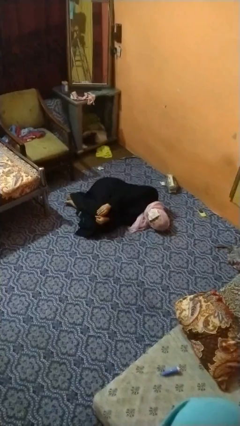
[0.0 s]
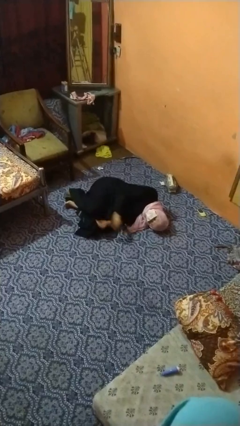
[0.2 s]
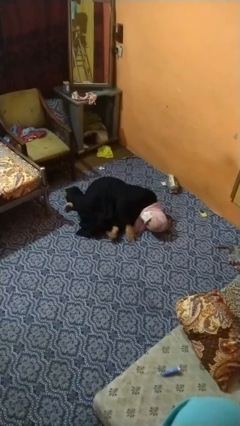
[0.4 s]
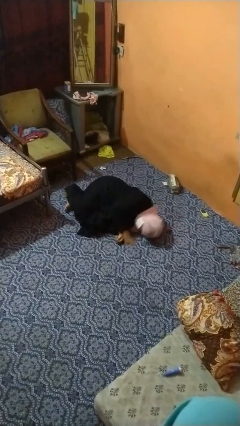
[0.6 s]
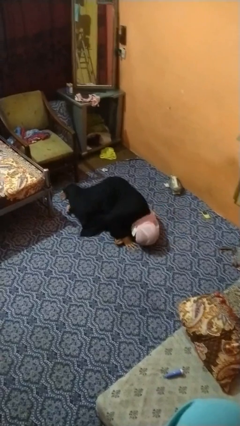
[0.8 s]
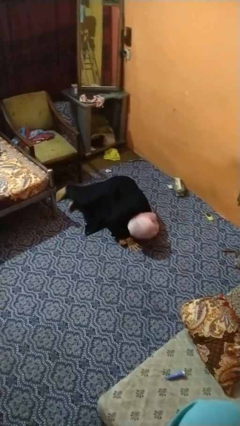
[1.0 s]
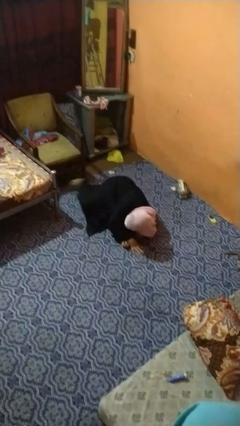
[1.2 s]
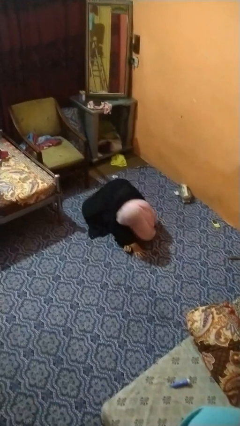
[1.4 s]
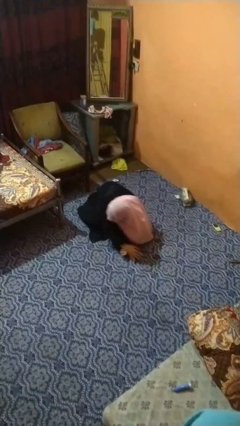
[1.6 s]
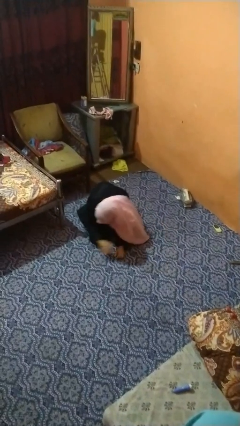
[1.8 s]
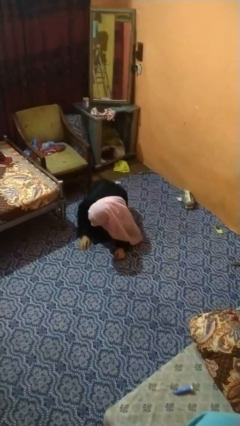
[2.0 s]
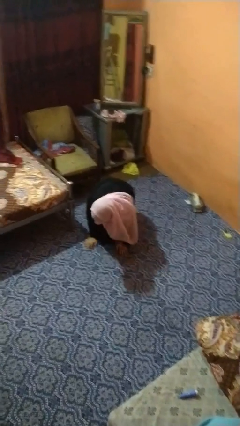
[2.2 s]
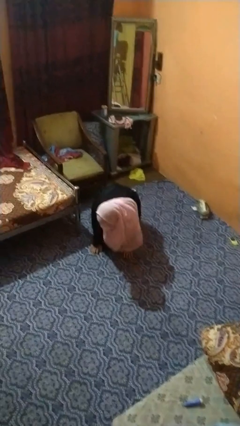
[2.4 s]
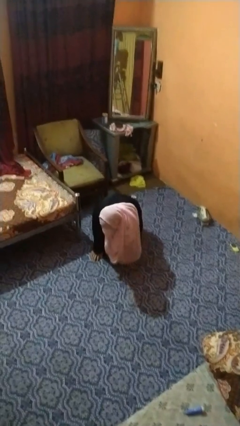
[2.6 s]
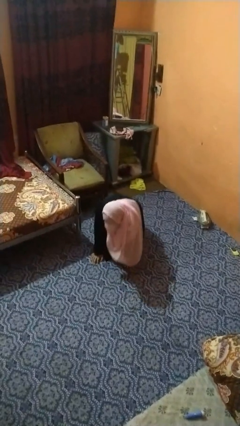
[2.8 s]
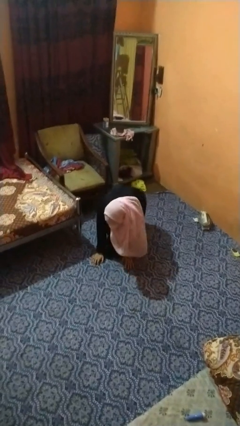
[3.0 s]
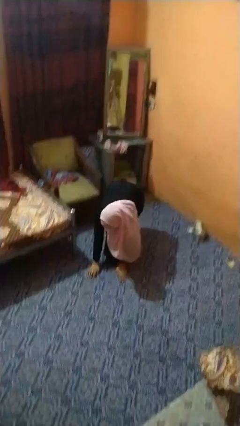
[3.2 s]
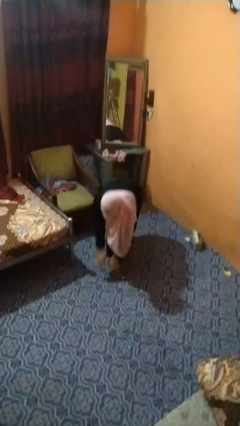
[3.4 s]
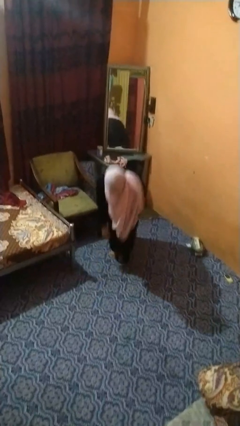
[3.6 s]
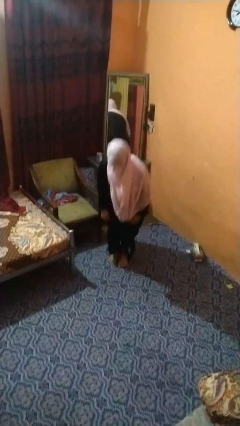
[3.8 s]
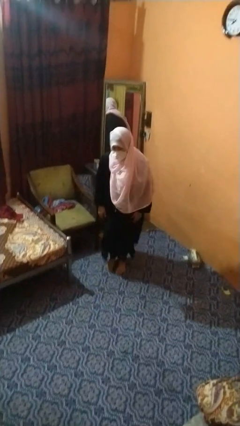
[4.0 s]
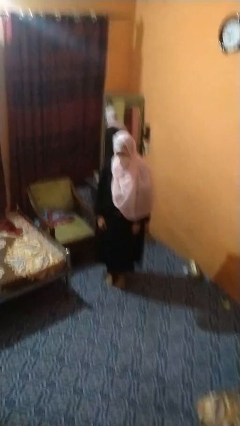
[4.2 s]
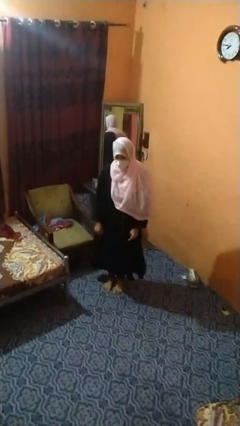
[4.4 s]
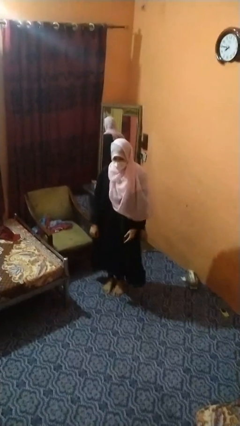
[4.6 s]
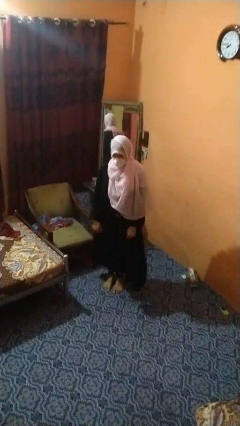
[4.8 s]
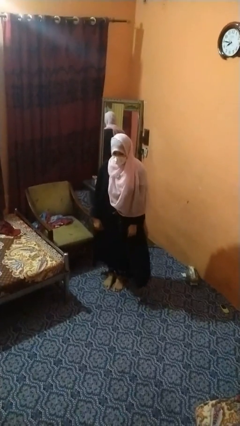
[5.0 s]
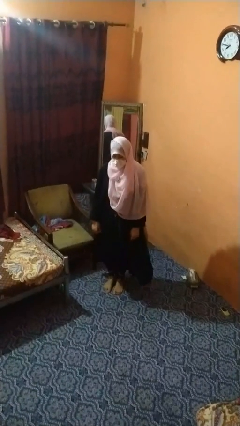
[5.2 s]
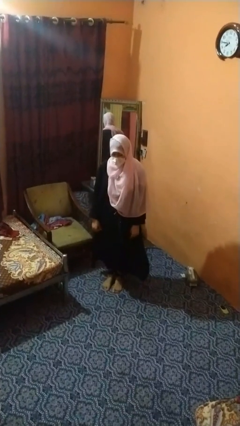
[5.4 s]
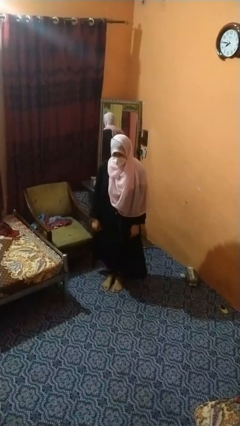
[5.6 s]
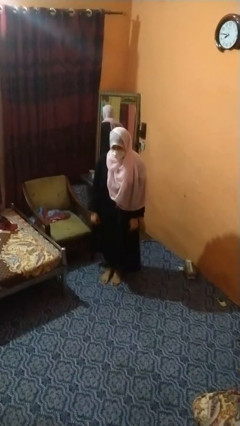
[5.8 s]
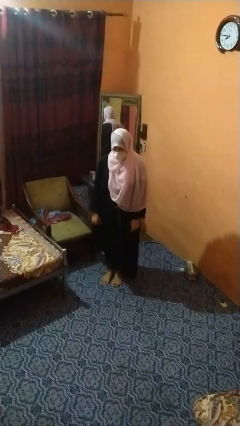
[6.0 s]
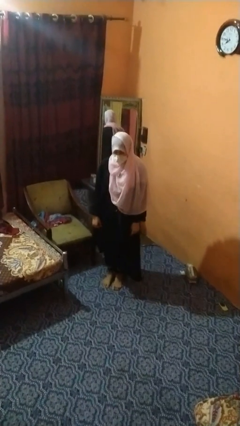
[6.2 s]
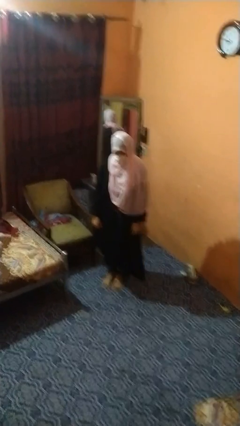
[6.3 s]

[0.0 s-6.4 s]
person stands up from floor

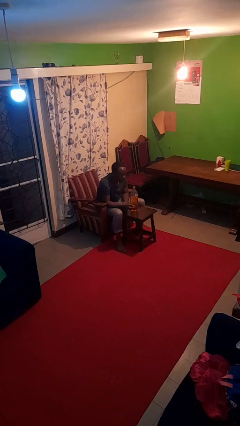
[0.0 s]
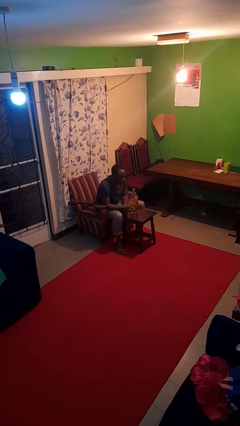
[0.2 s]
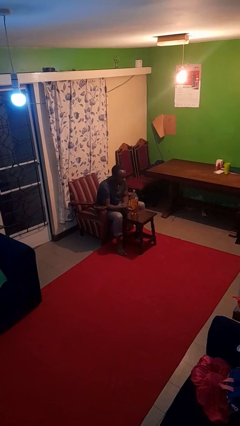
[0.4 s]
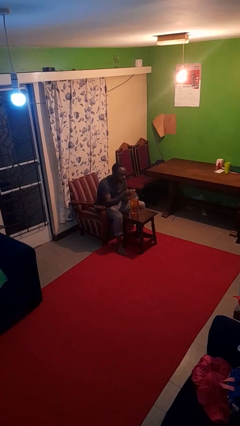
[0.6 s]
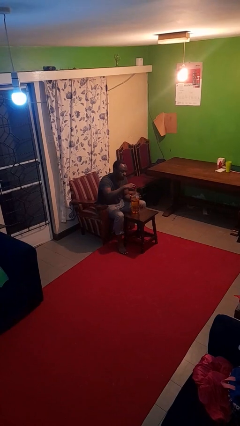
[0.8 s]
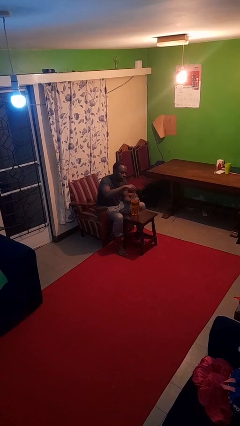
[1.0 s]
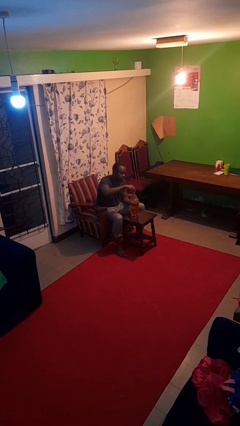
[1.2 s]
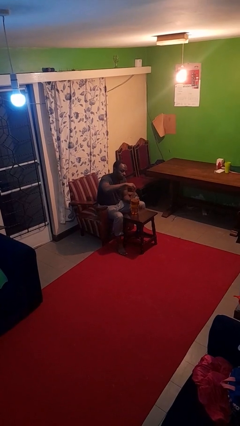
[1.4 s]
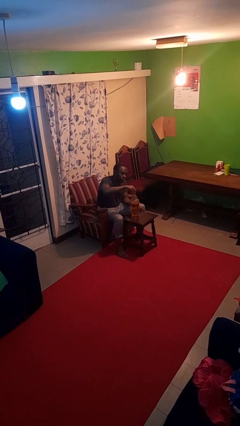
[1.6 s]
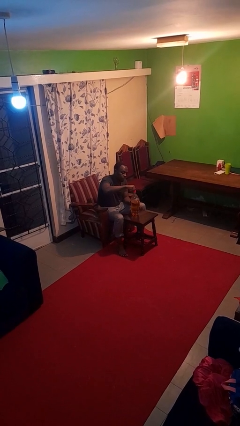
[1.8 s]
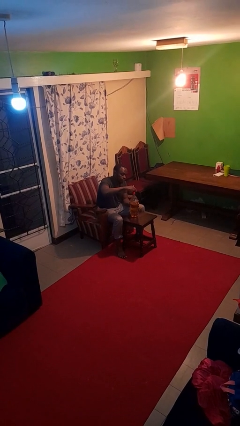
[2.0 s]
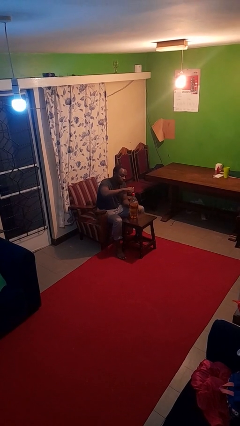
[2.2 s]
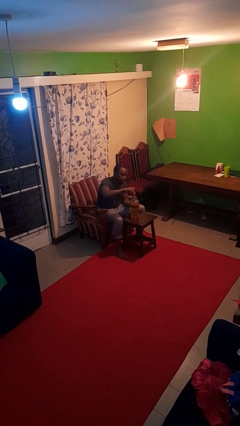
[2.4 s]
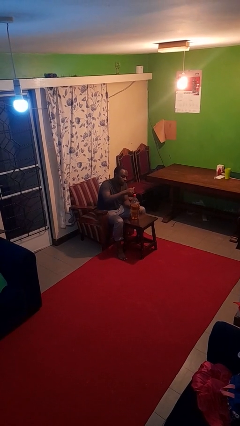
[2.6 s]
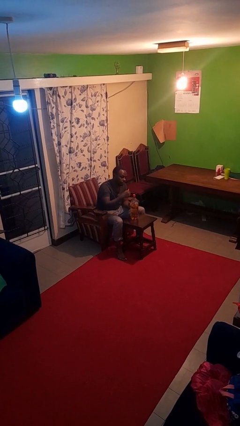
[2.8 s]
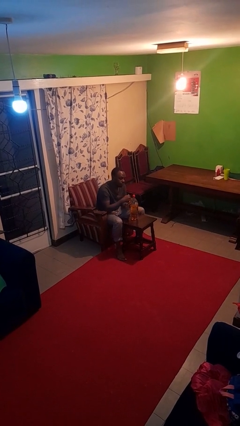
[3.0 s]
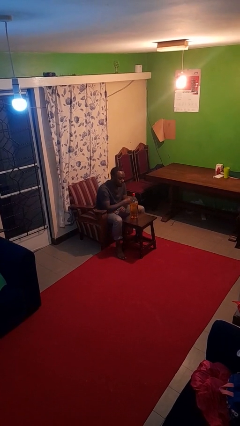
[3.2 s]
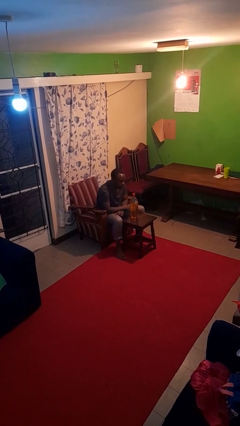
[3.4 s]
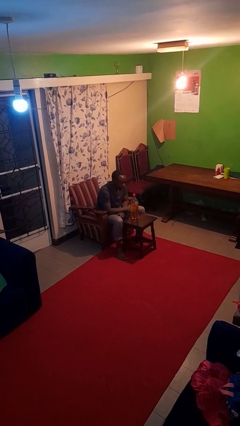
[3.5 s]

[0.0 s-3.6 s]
person screws lid to bottle

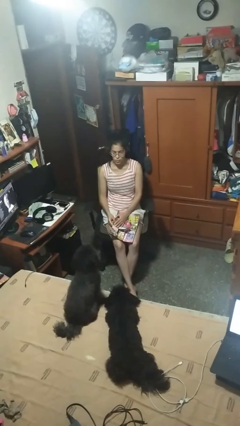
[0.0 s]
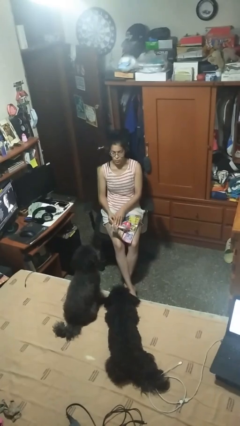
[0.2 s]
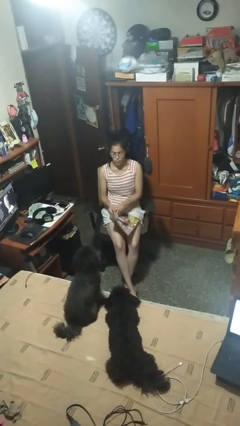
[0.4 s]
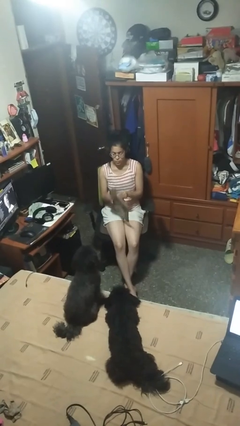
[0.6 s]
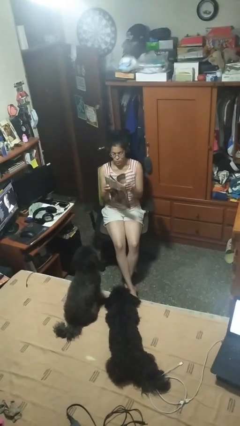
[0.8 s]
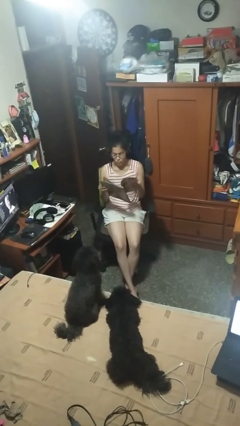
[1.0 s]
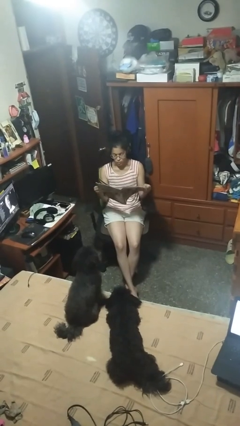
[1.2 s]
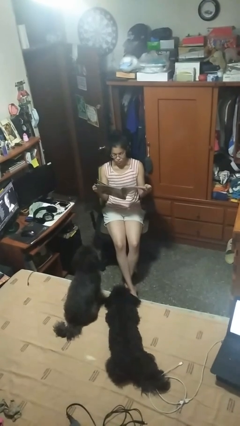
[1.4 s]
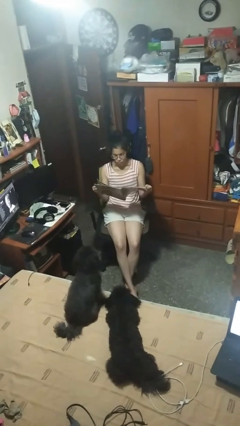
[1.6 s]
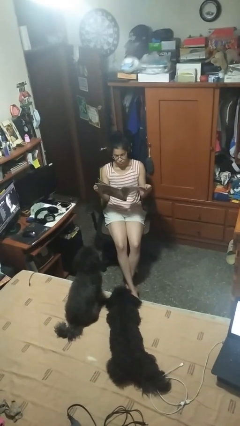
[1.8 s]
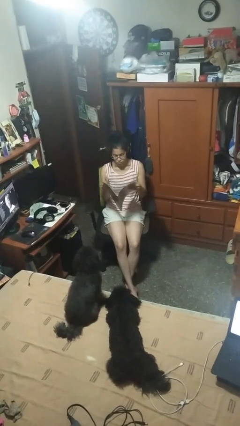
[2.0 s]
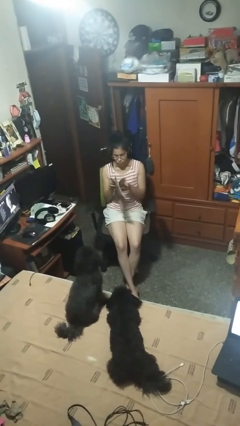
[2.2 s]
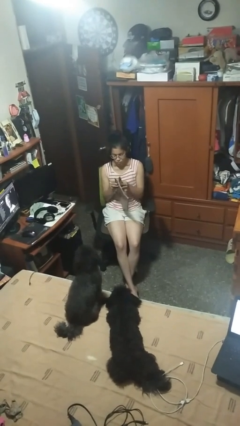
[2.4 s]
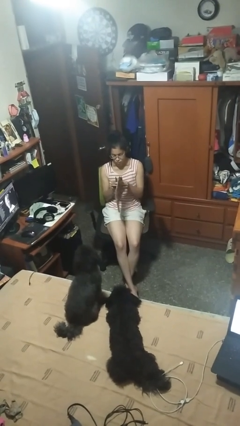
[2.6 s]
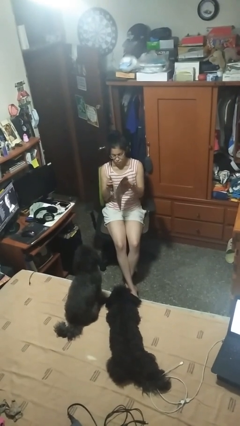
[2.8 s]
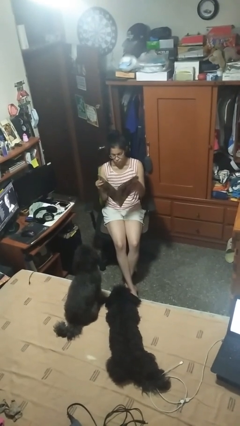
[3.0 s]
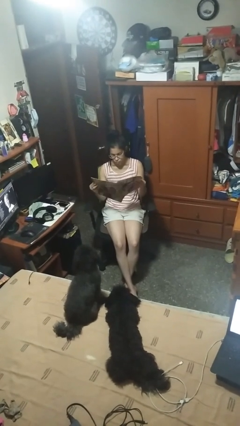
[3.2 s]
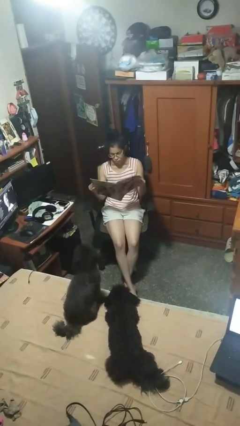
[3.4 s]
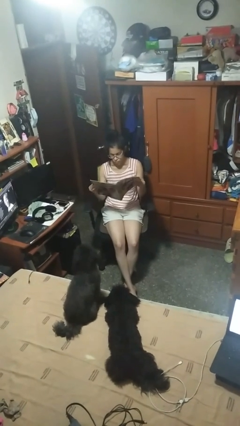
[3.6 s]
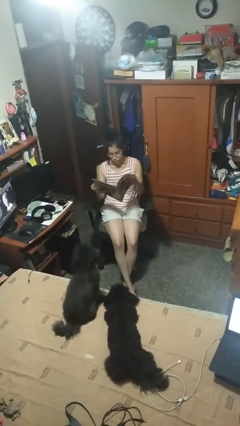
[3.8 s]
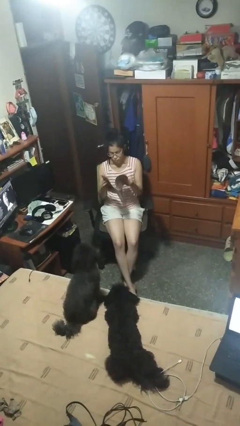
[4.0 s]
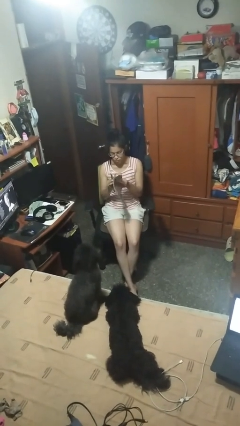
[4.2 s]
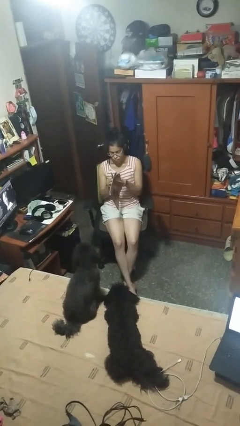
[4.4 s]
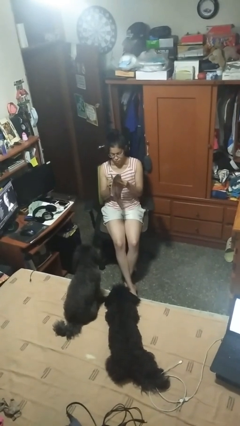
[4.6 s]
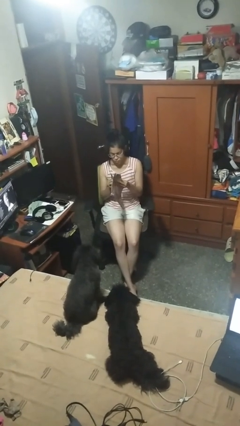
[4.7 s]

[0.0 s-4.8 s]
person reads magazine

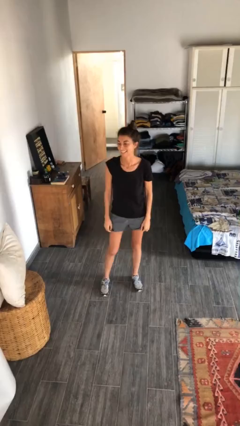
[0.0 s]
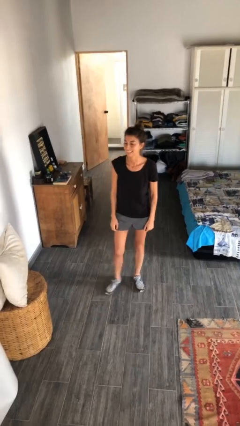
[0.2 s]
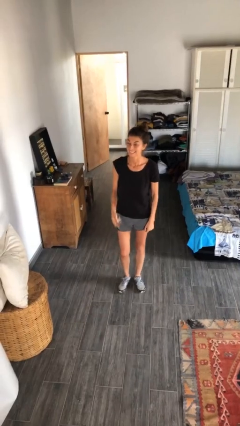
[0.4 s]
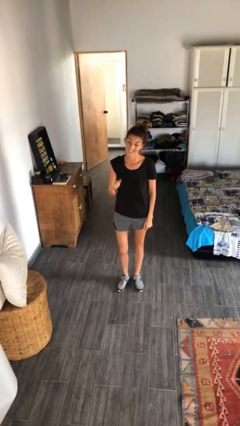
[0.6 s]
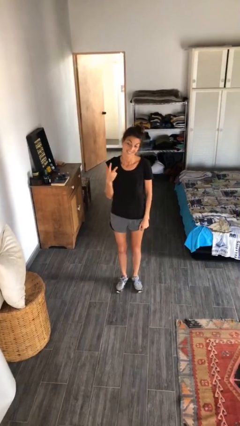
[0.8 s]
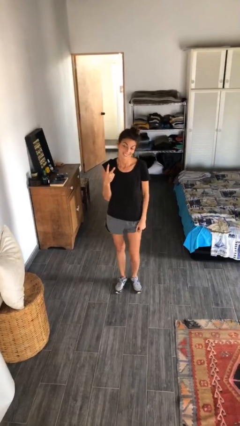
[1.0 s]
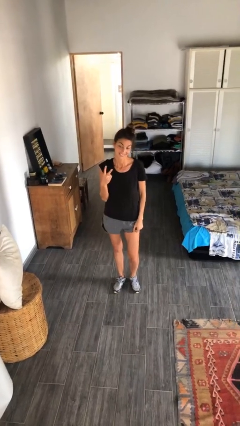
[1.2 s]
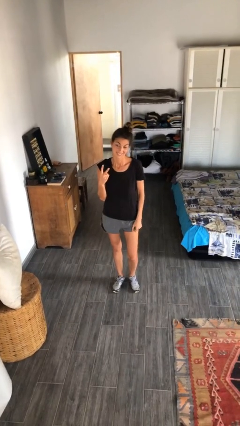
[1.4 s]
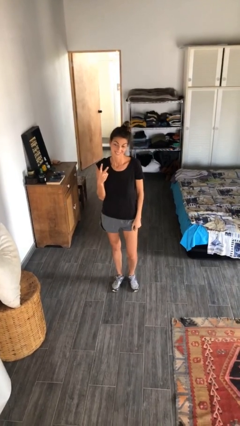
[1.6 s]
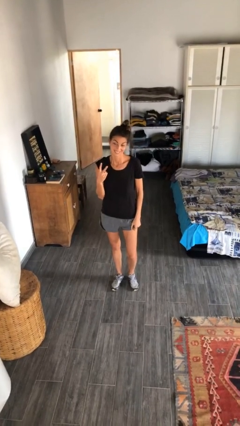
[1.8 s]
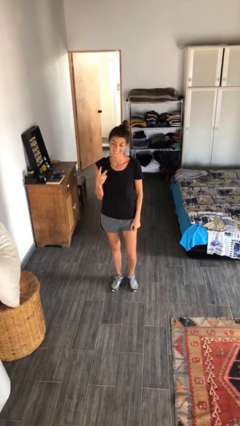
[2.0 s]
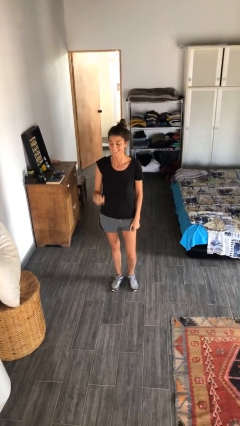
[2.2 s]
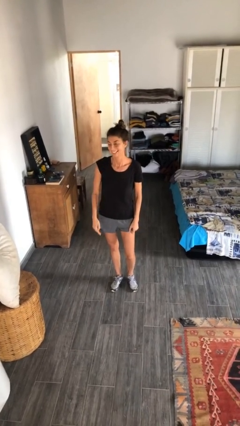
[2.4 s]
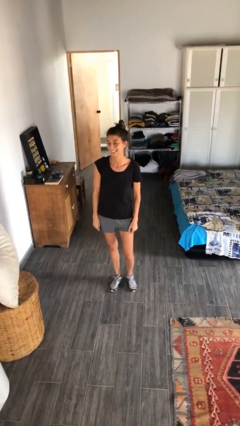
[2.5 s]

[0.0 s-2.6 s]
person gestures peace

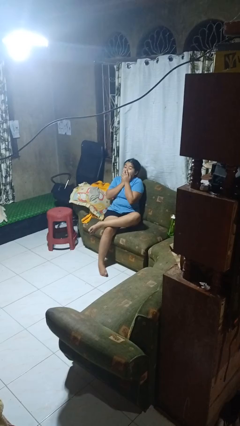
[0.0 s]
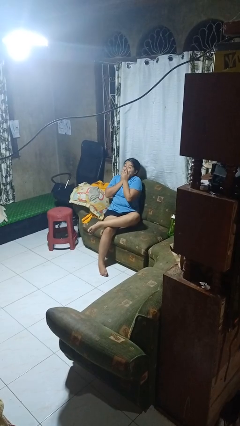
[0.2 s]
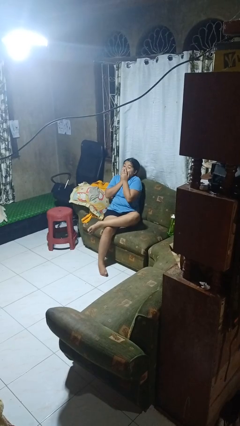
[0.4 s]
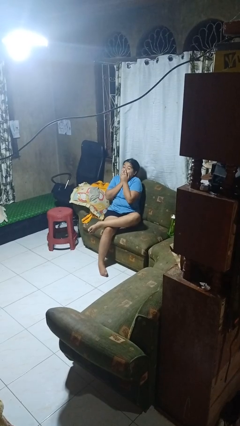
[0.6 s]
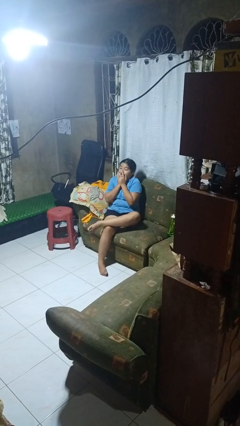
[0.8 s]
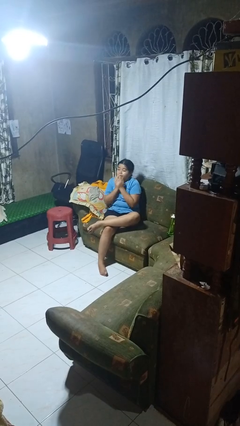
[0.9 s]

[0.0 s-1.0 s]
person covers face with hands
